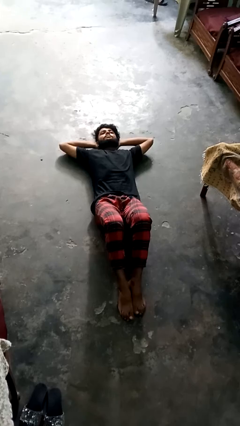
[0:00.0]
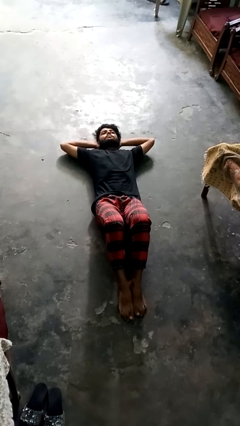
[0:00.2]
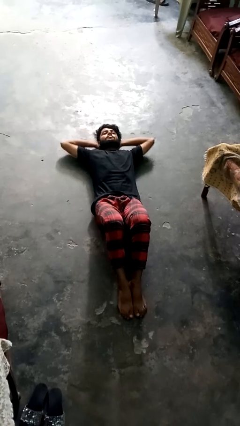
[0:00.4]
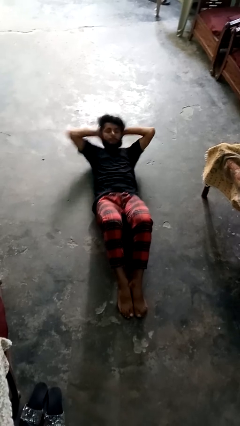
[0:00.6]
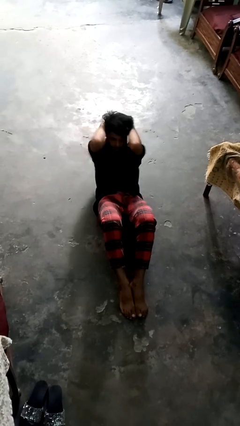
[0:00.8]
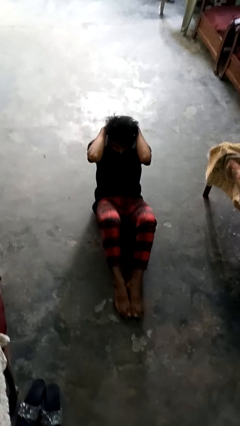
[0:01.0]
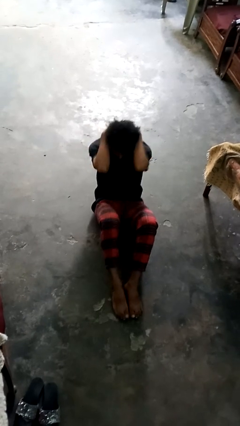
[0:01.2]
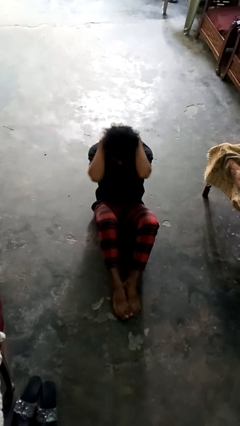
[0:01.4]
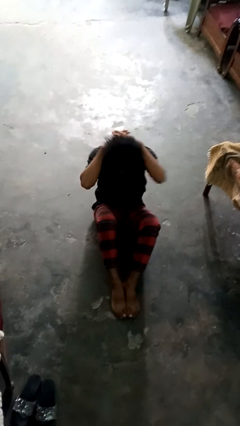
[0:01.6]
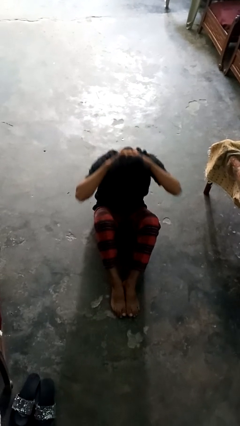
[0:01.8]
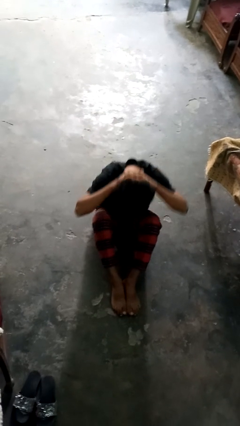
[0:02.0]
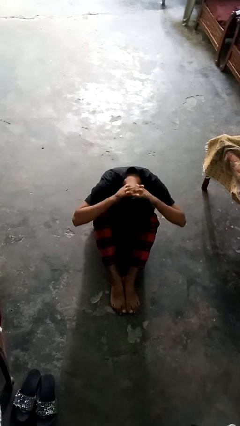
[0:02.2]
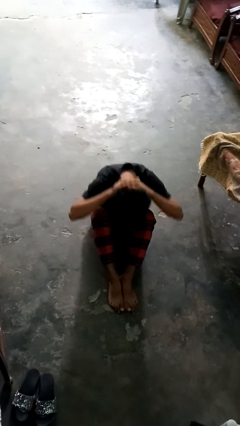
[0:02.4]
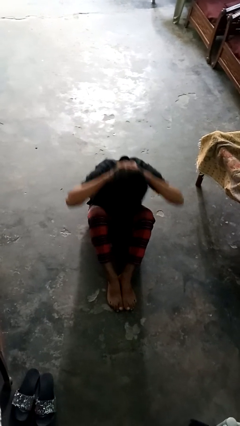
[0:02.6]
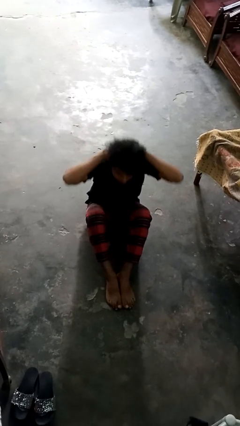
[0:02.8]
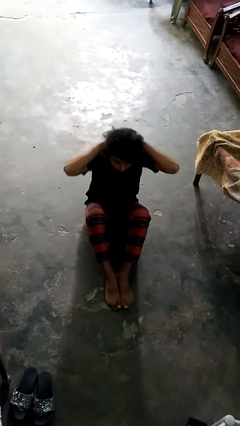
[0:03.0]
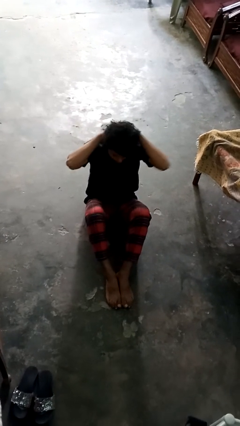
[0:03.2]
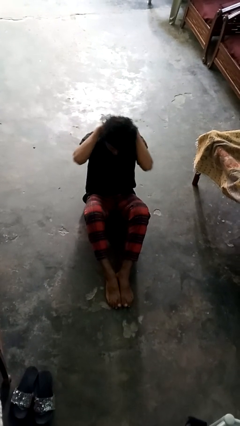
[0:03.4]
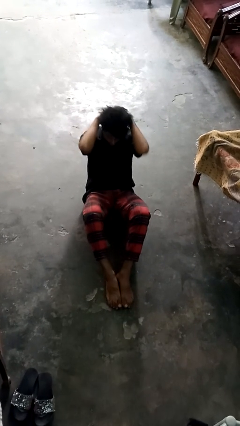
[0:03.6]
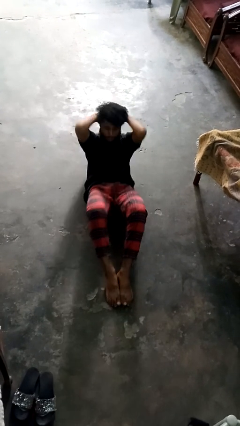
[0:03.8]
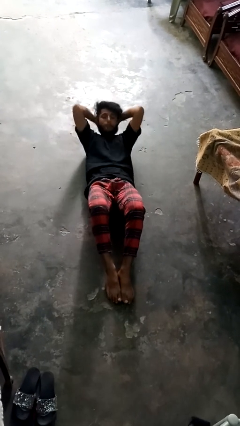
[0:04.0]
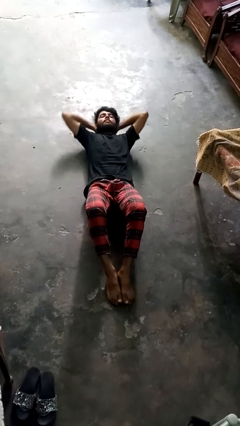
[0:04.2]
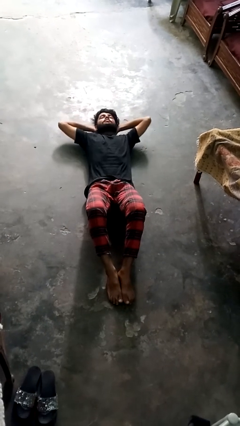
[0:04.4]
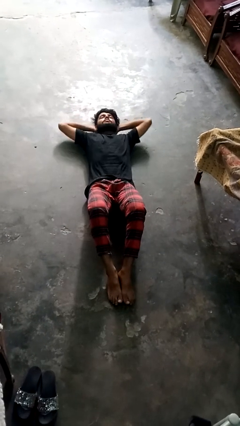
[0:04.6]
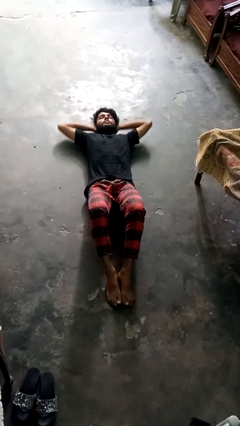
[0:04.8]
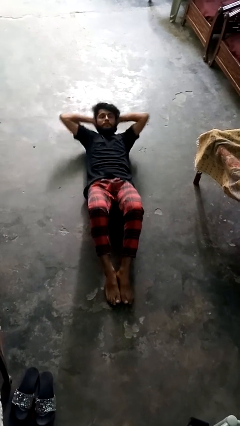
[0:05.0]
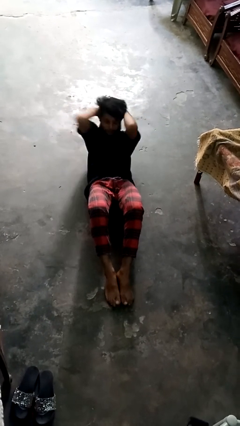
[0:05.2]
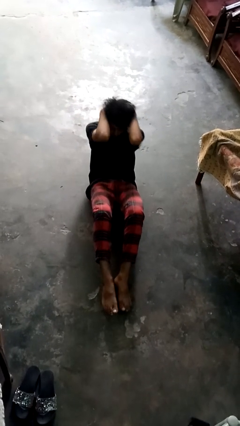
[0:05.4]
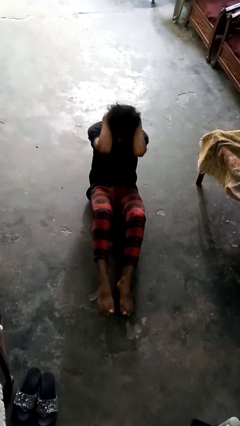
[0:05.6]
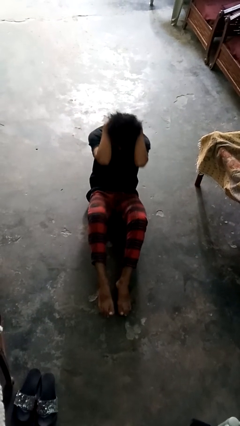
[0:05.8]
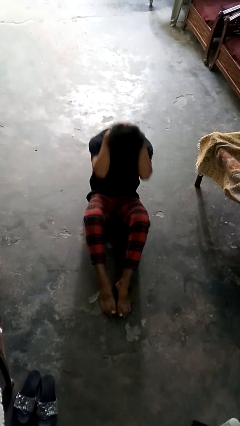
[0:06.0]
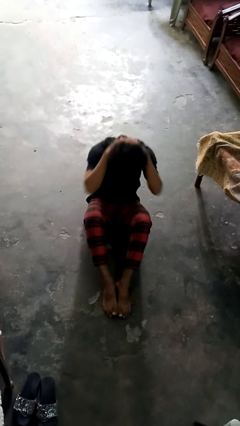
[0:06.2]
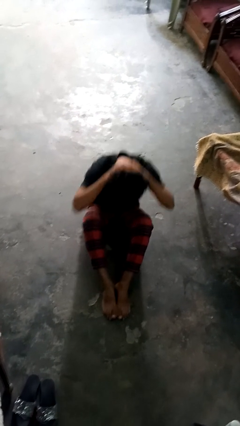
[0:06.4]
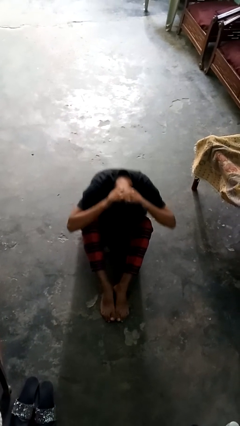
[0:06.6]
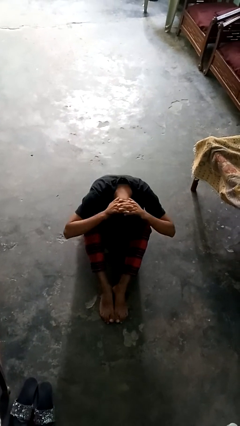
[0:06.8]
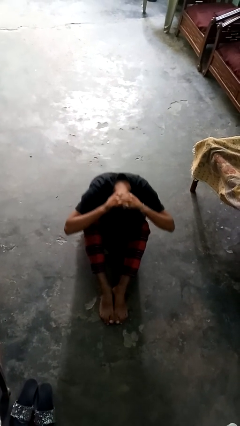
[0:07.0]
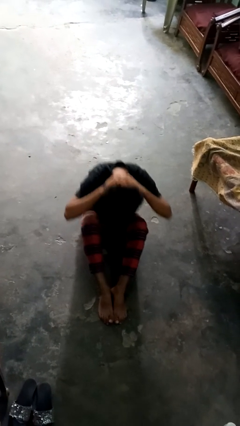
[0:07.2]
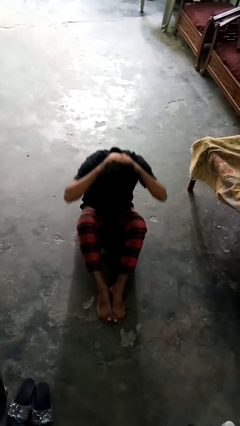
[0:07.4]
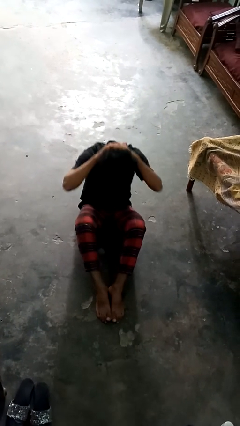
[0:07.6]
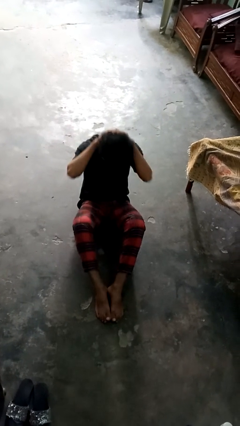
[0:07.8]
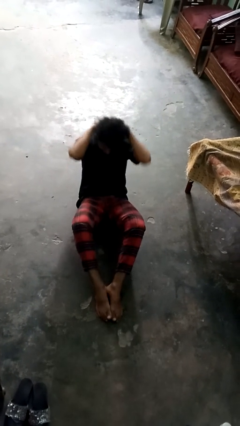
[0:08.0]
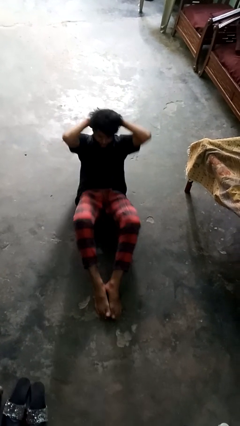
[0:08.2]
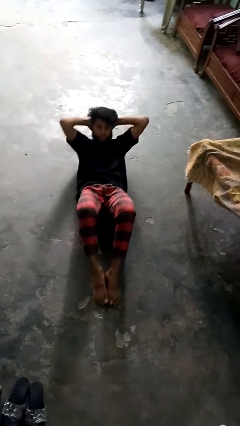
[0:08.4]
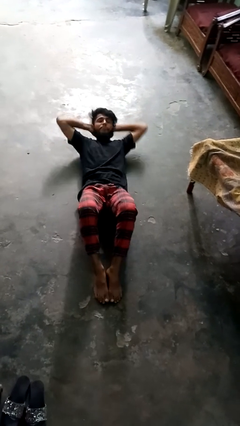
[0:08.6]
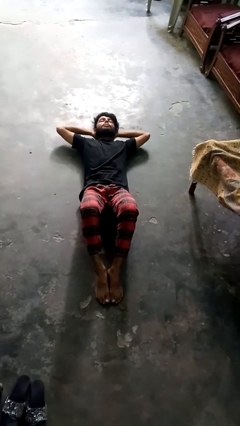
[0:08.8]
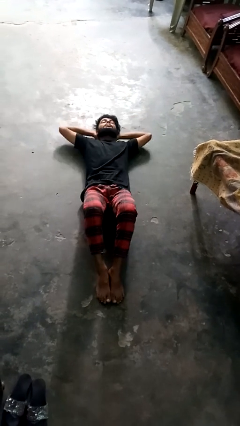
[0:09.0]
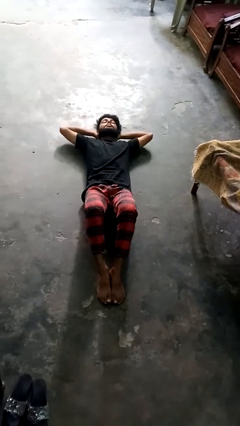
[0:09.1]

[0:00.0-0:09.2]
person exercises with situp

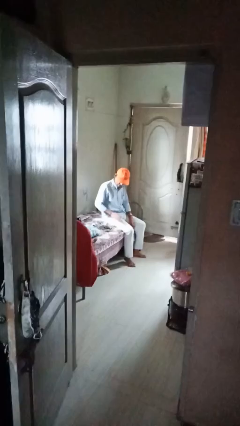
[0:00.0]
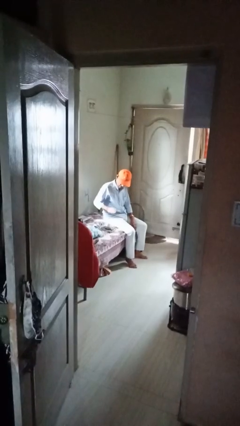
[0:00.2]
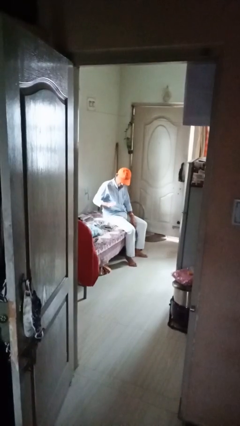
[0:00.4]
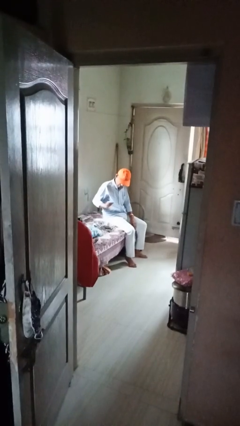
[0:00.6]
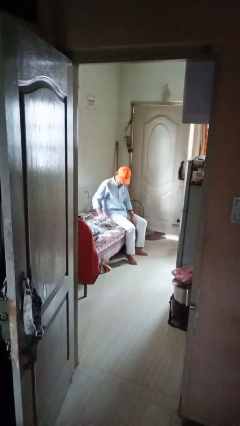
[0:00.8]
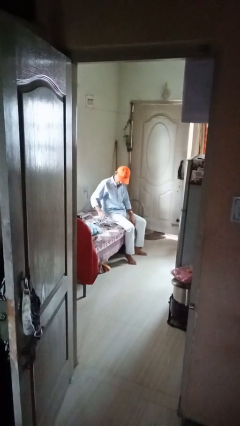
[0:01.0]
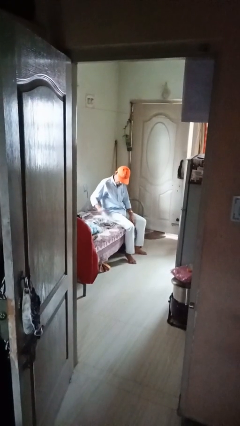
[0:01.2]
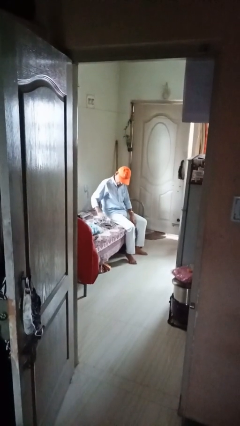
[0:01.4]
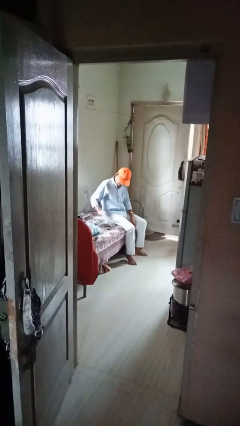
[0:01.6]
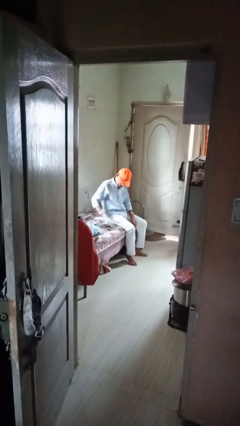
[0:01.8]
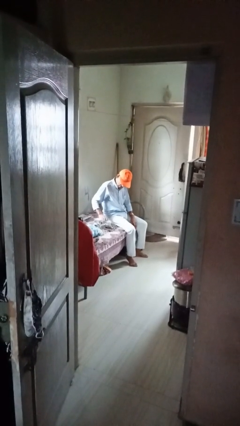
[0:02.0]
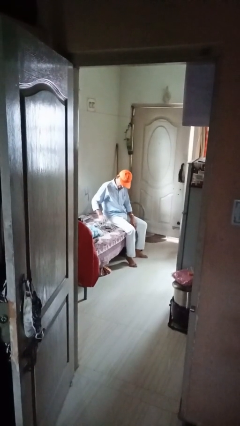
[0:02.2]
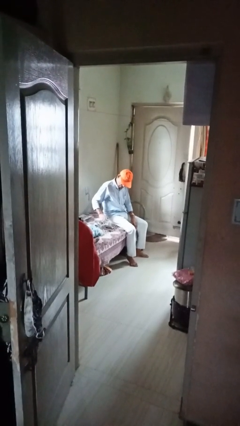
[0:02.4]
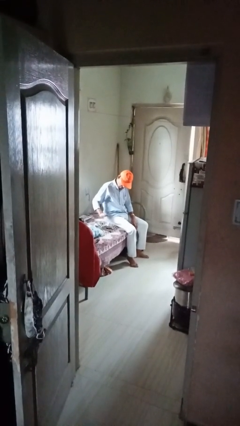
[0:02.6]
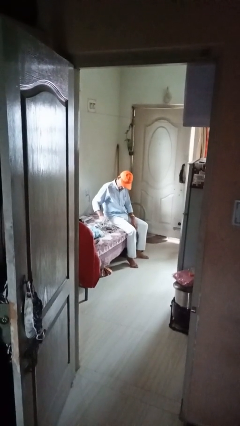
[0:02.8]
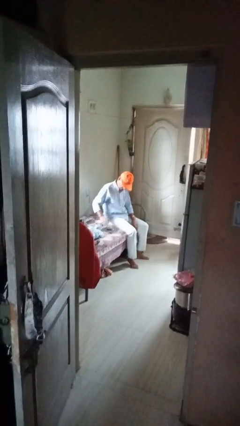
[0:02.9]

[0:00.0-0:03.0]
person taps object with finger

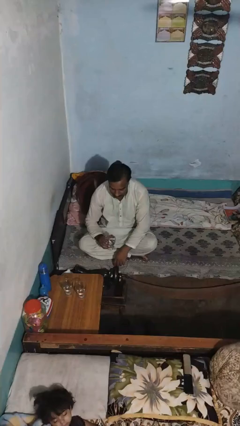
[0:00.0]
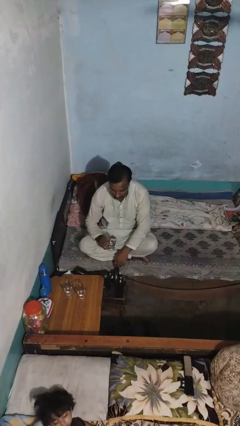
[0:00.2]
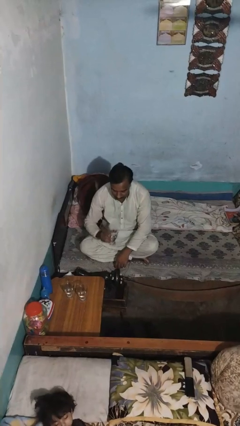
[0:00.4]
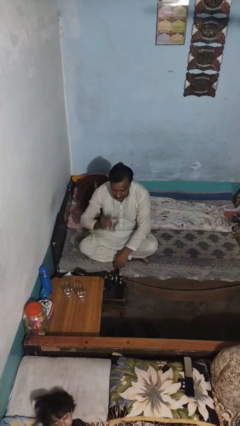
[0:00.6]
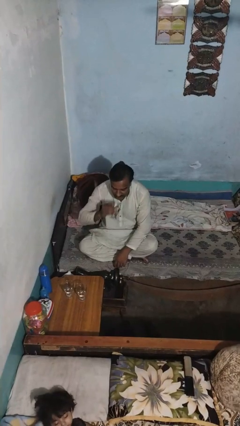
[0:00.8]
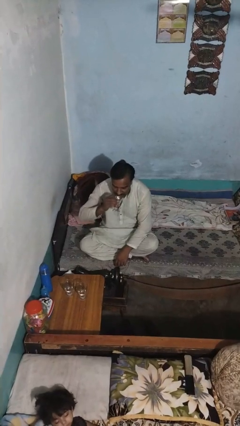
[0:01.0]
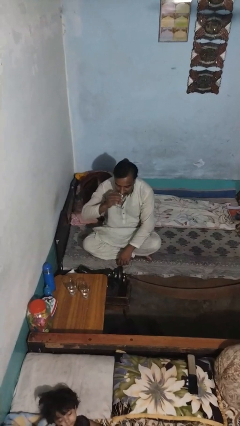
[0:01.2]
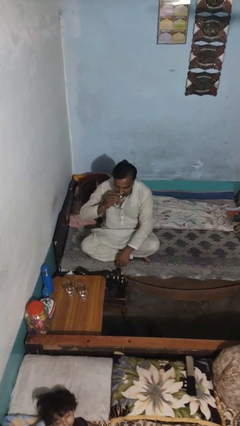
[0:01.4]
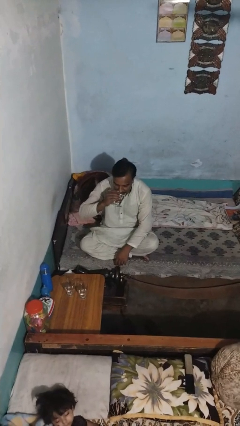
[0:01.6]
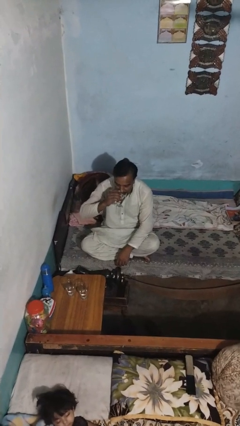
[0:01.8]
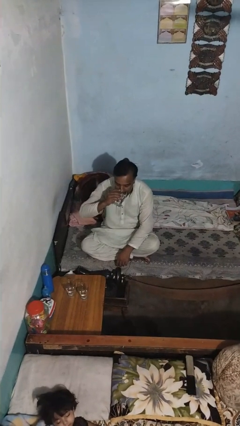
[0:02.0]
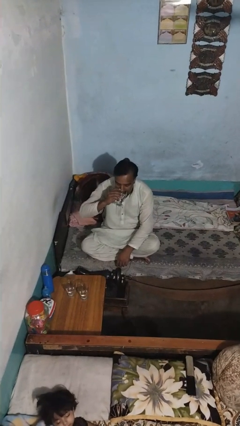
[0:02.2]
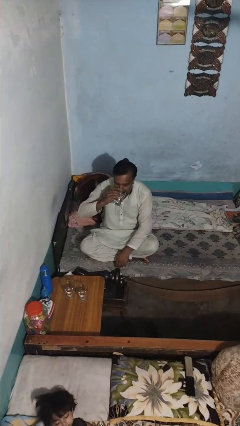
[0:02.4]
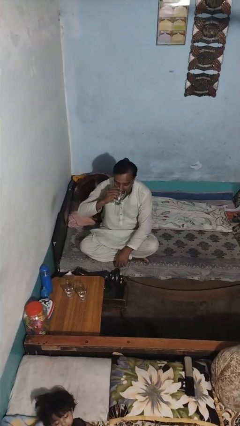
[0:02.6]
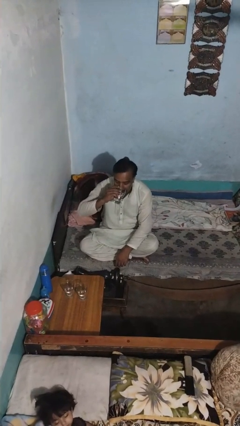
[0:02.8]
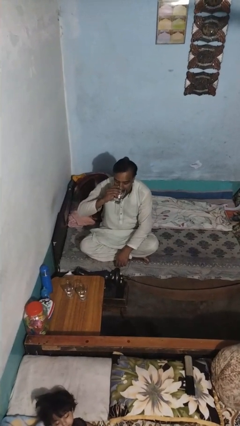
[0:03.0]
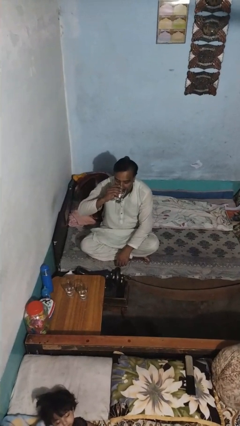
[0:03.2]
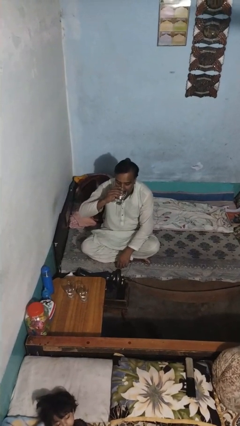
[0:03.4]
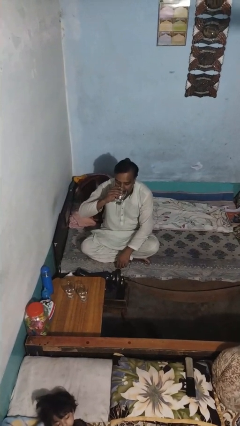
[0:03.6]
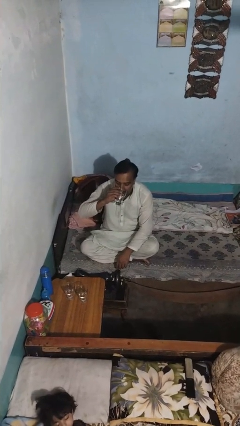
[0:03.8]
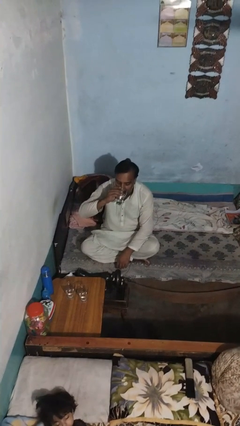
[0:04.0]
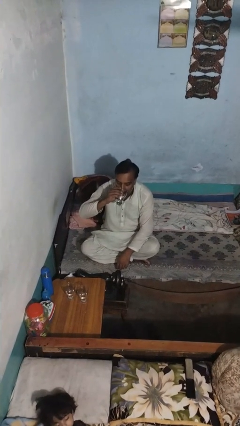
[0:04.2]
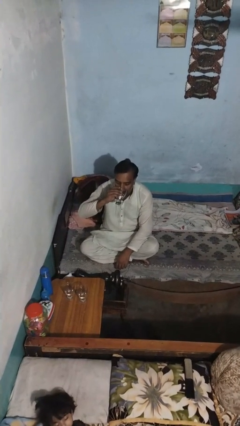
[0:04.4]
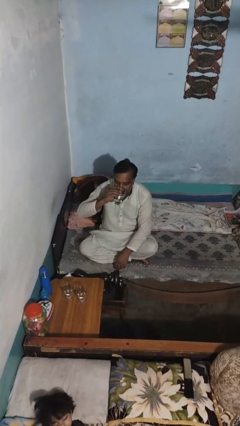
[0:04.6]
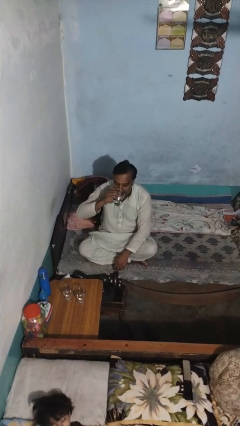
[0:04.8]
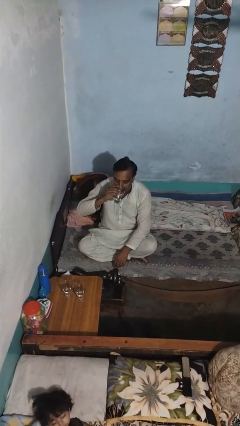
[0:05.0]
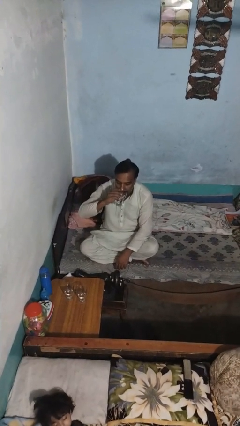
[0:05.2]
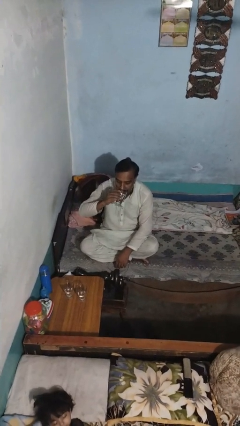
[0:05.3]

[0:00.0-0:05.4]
person drinks from shotglass

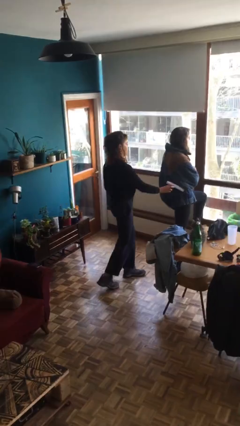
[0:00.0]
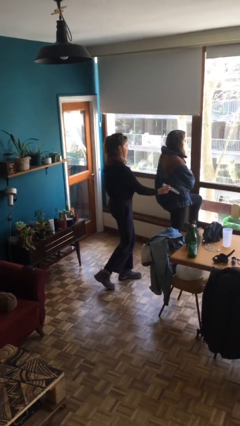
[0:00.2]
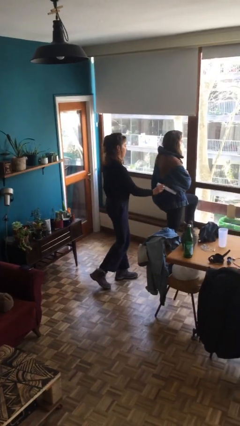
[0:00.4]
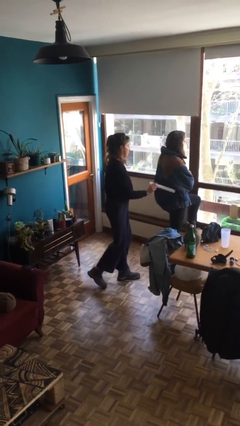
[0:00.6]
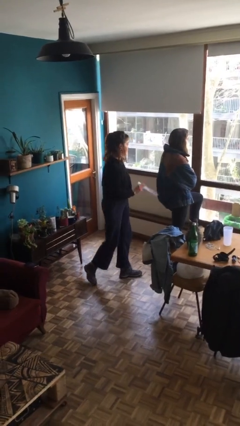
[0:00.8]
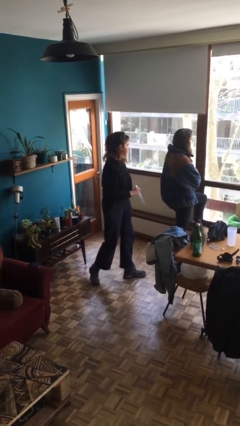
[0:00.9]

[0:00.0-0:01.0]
person steals object from person
